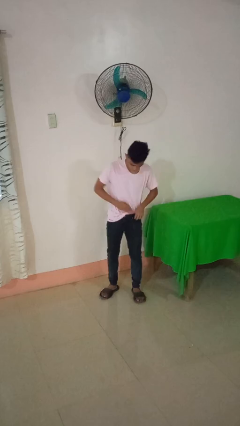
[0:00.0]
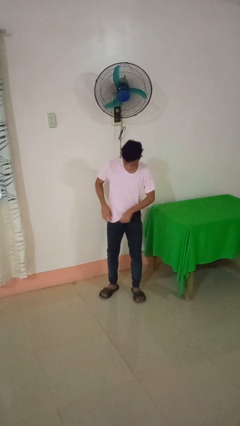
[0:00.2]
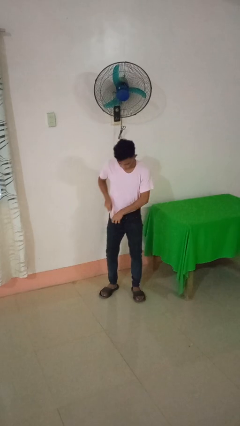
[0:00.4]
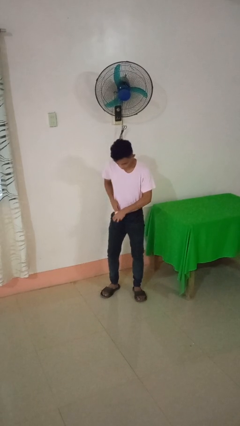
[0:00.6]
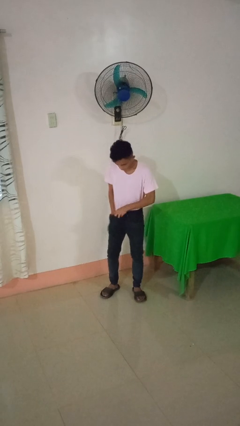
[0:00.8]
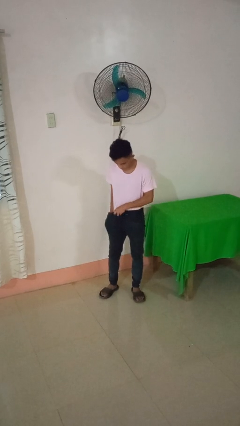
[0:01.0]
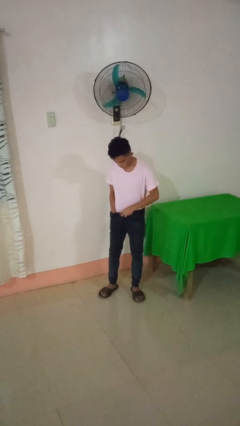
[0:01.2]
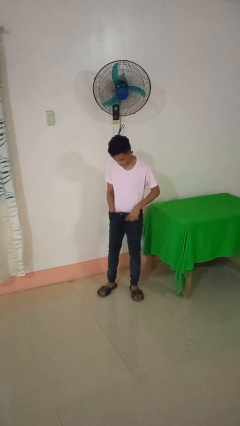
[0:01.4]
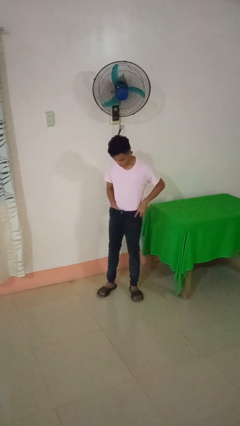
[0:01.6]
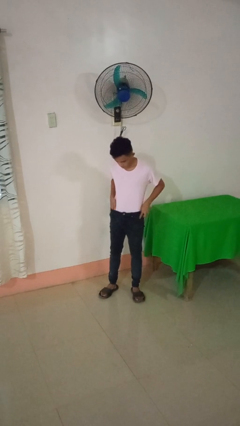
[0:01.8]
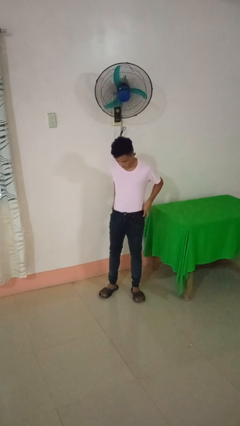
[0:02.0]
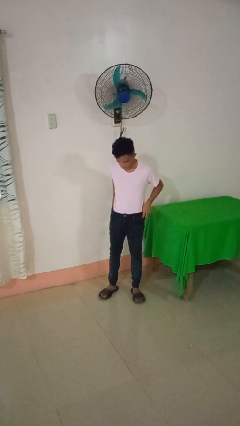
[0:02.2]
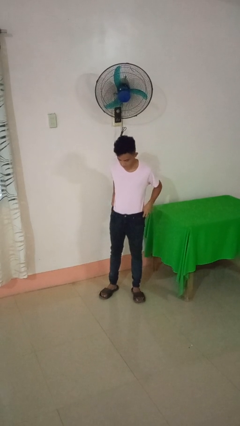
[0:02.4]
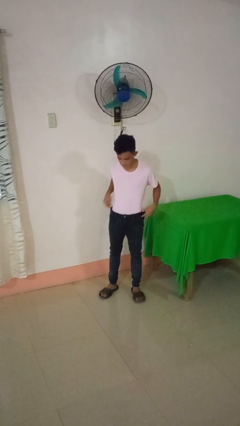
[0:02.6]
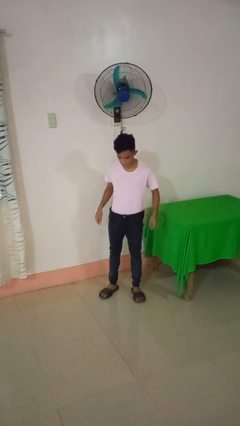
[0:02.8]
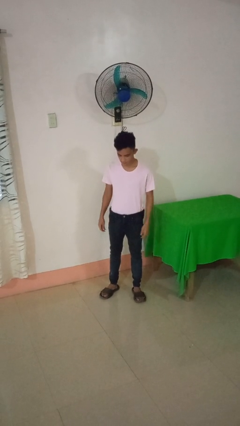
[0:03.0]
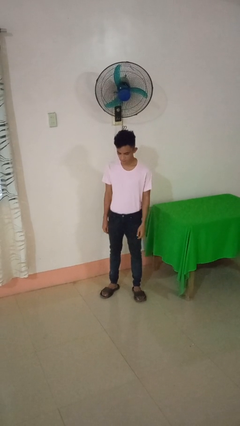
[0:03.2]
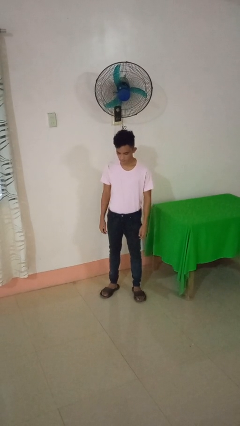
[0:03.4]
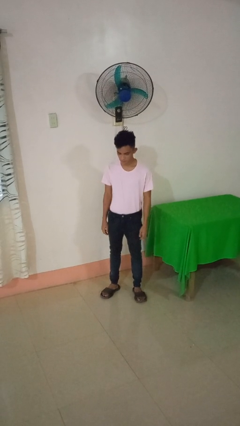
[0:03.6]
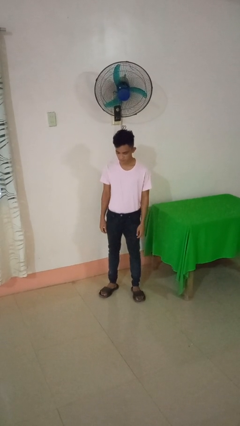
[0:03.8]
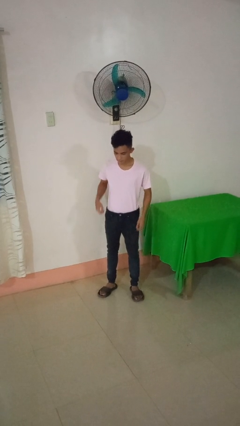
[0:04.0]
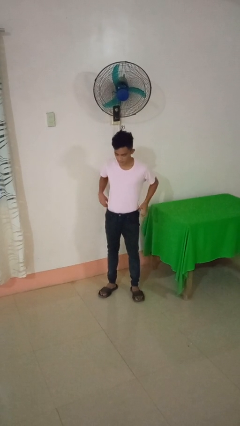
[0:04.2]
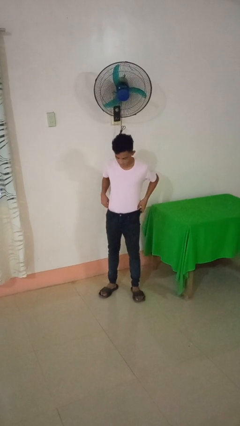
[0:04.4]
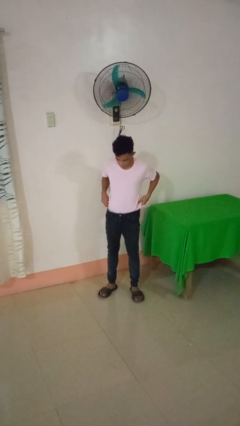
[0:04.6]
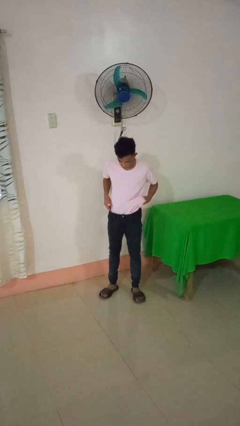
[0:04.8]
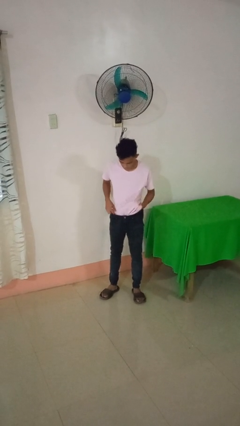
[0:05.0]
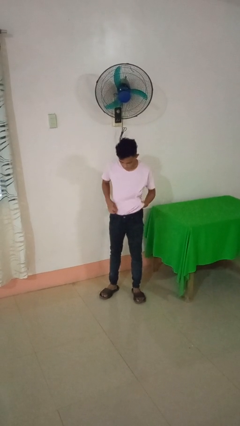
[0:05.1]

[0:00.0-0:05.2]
person tucks in shirt

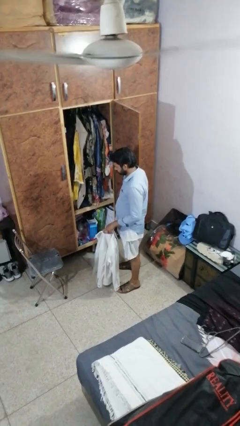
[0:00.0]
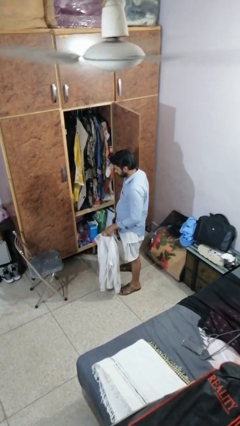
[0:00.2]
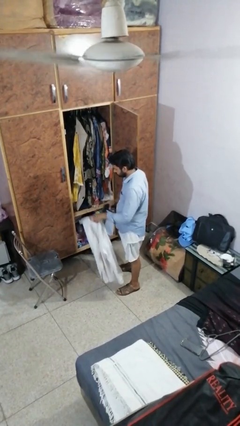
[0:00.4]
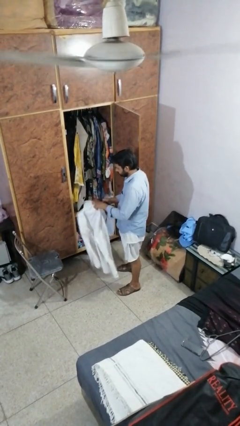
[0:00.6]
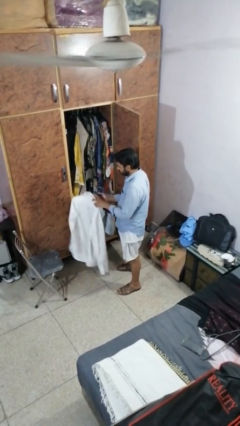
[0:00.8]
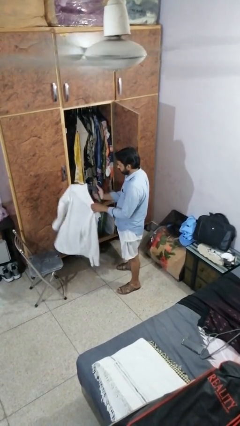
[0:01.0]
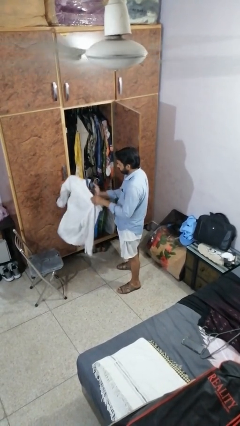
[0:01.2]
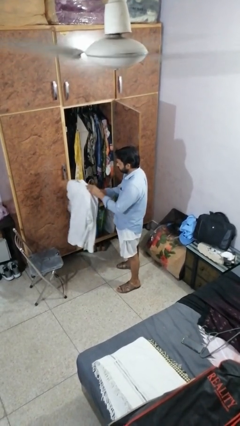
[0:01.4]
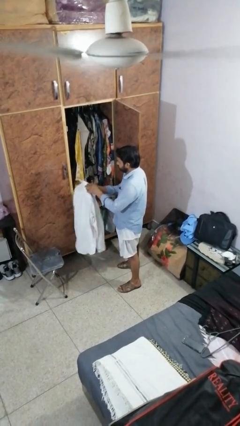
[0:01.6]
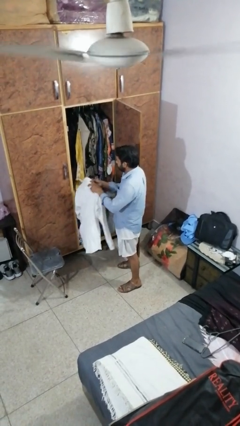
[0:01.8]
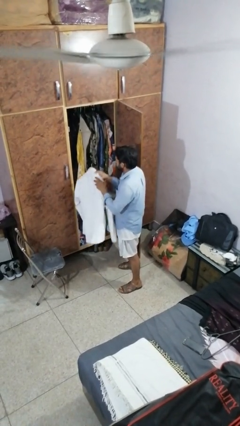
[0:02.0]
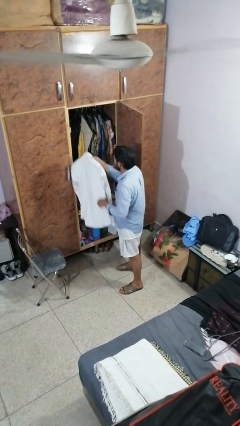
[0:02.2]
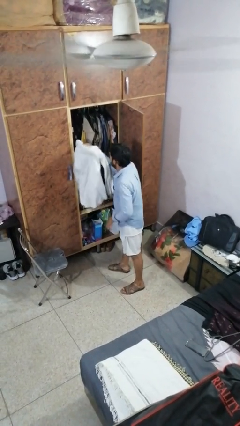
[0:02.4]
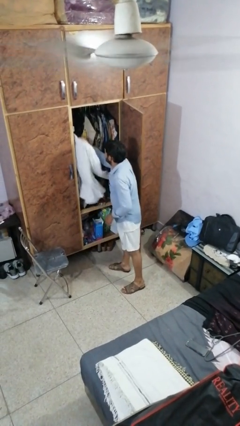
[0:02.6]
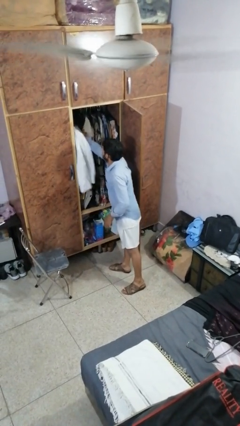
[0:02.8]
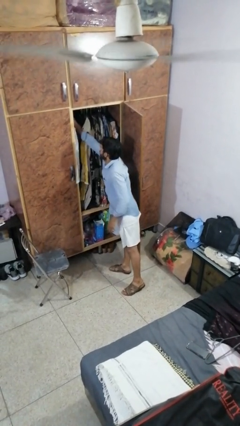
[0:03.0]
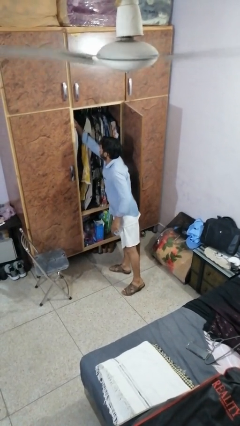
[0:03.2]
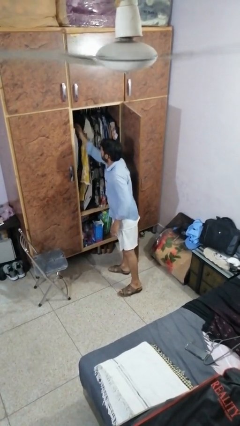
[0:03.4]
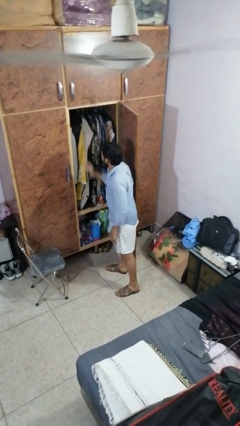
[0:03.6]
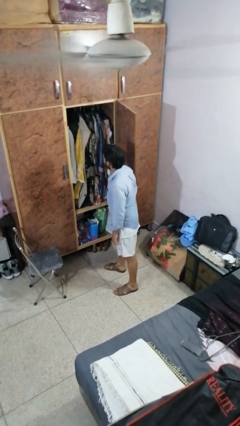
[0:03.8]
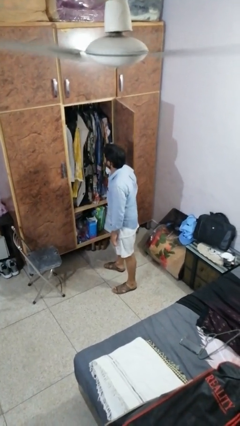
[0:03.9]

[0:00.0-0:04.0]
person puts clothes into closet

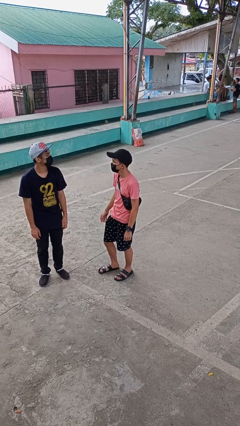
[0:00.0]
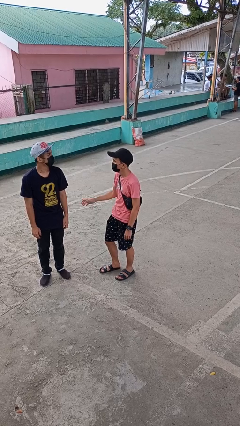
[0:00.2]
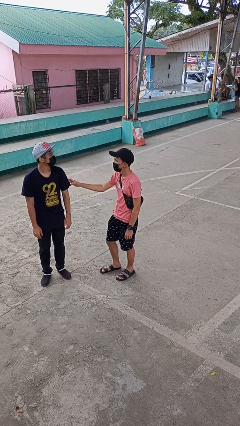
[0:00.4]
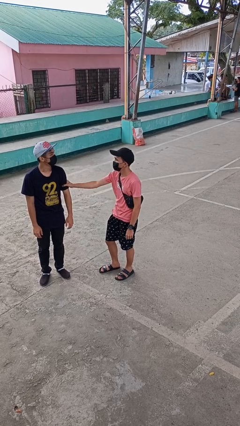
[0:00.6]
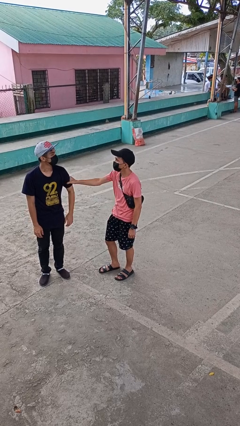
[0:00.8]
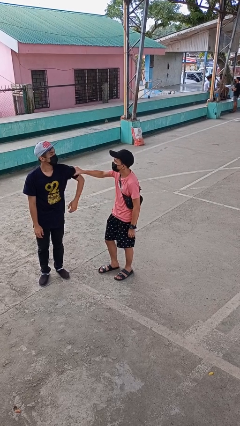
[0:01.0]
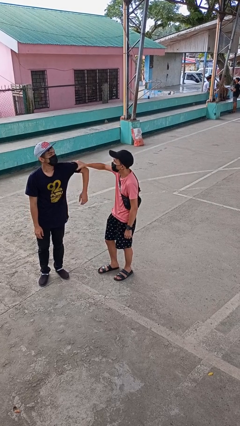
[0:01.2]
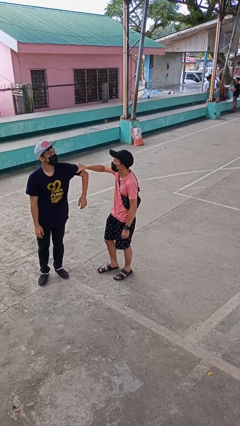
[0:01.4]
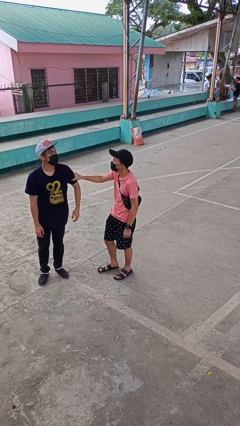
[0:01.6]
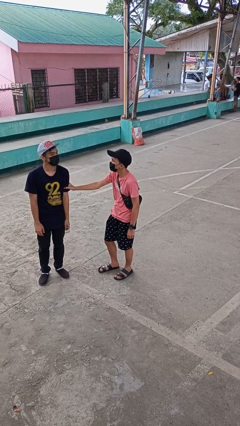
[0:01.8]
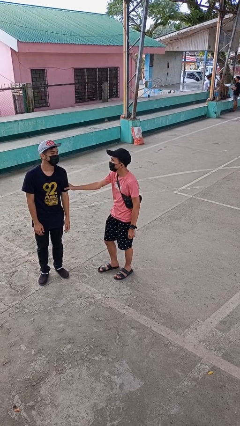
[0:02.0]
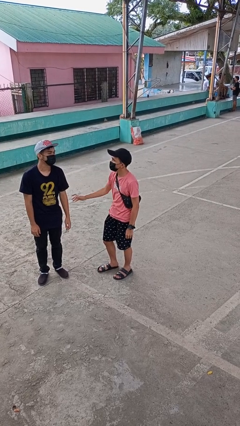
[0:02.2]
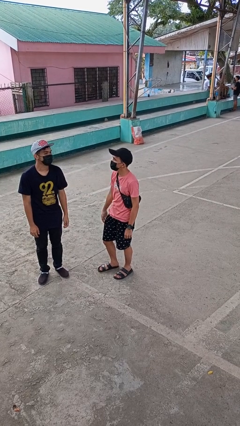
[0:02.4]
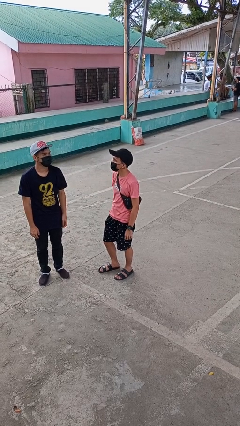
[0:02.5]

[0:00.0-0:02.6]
person grabs person by bicep

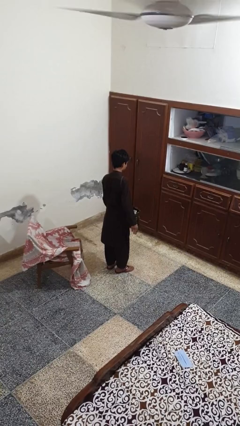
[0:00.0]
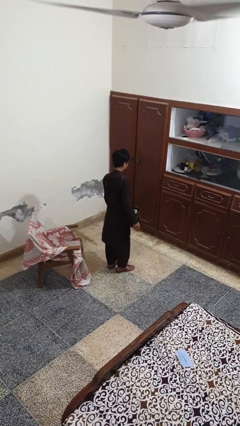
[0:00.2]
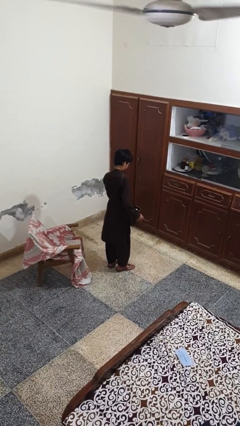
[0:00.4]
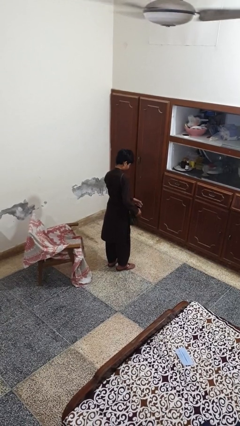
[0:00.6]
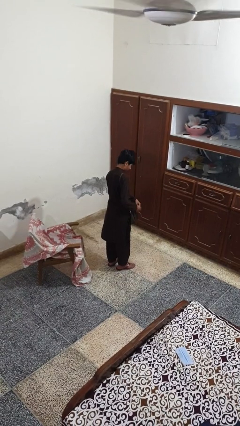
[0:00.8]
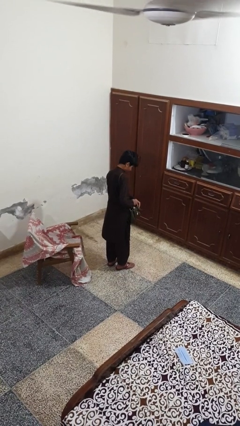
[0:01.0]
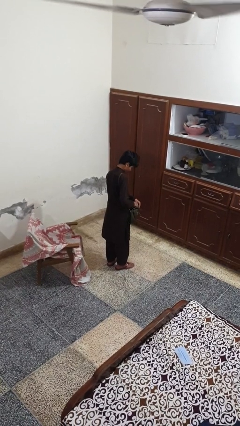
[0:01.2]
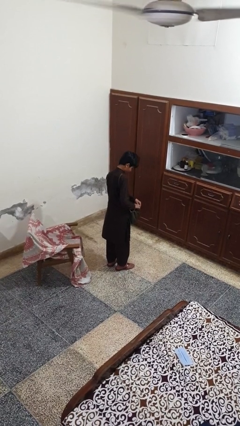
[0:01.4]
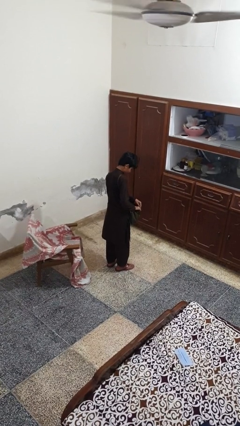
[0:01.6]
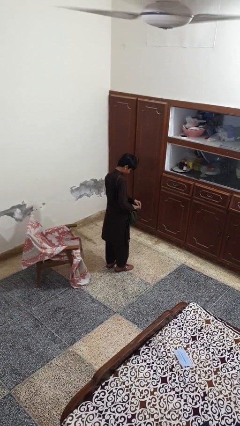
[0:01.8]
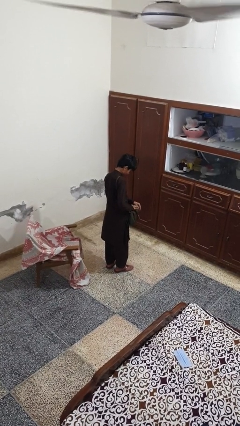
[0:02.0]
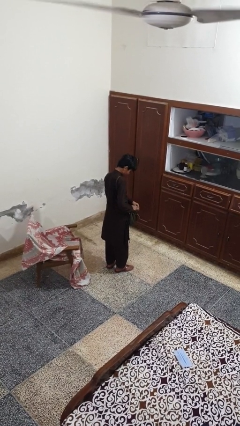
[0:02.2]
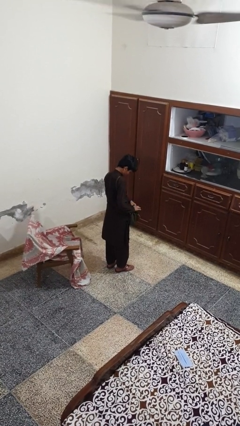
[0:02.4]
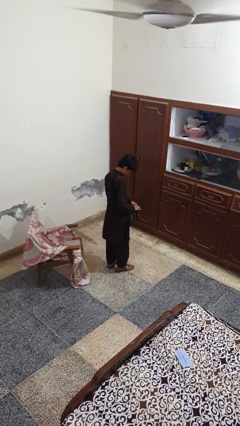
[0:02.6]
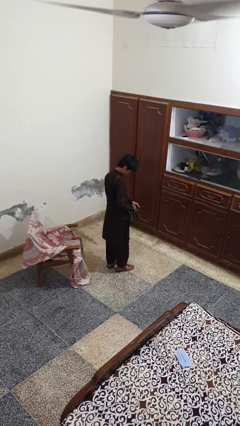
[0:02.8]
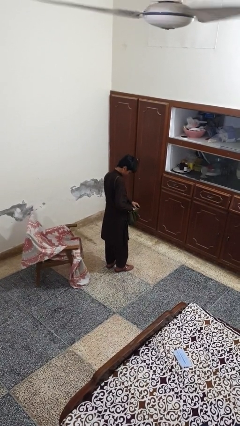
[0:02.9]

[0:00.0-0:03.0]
person searches in purse

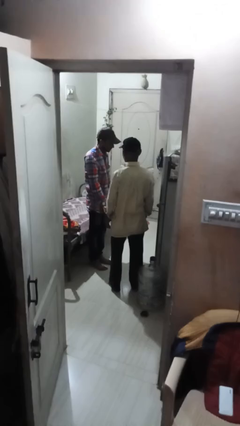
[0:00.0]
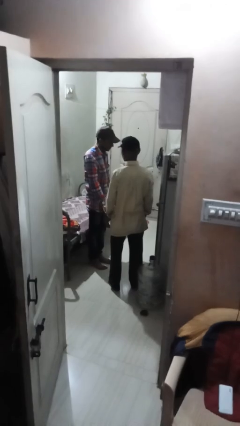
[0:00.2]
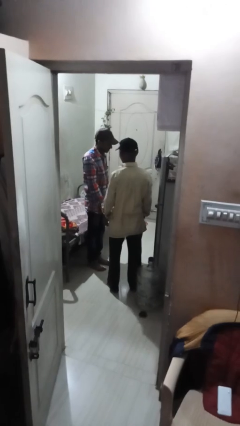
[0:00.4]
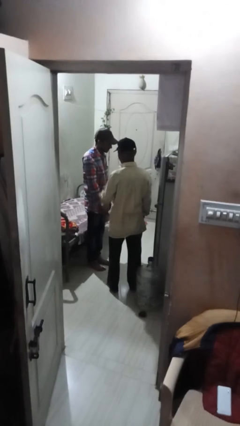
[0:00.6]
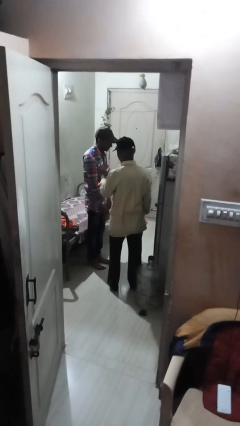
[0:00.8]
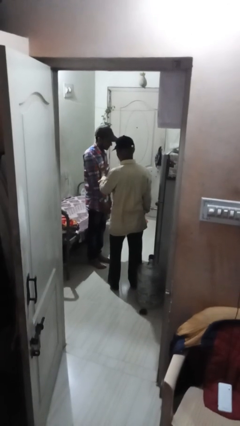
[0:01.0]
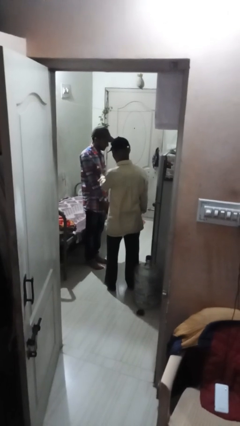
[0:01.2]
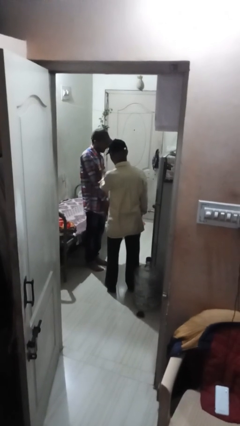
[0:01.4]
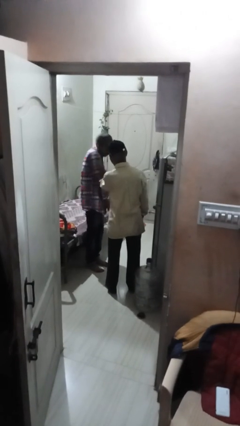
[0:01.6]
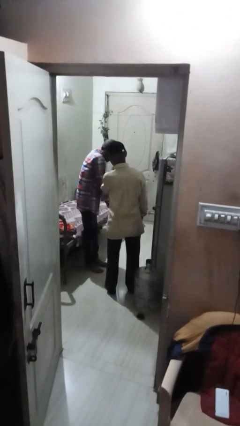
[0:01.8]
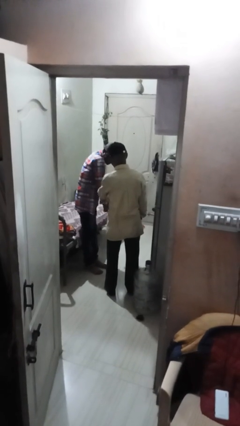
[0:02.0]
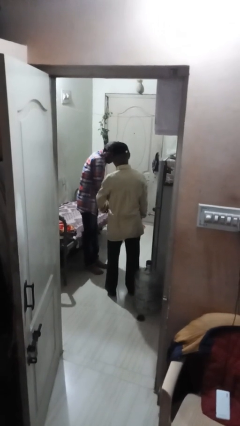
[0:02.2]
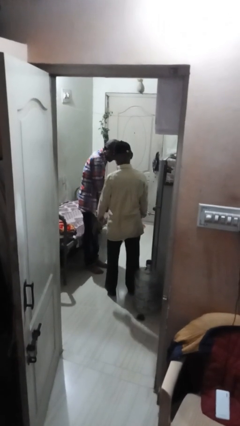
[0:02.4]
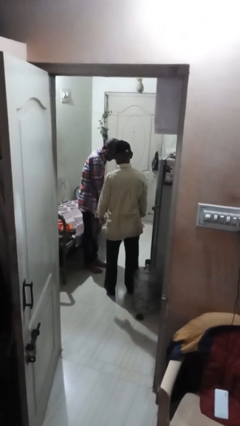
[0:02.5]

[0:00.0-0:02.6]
person tickles person
